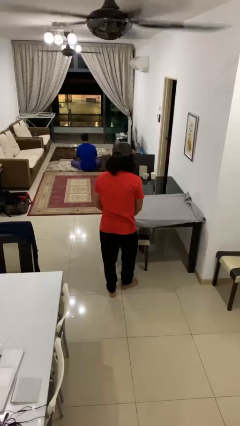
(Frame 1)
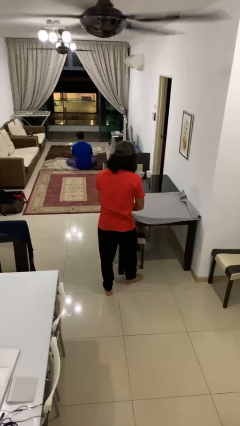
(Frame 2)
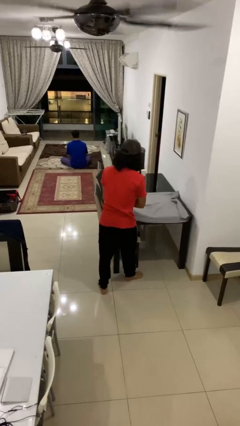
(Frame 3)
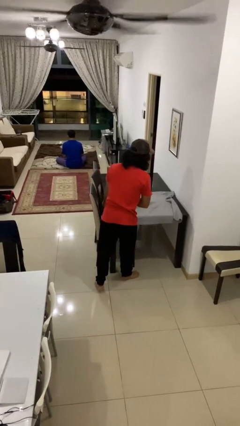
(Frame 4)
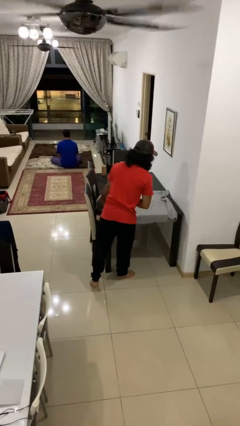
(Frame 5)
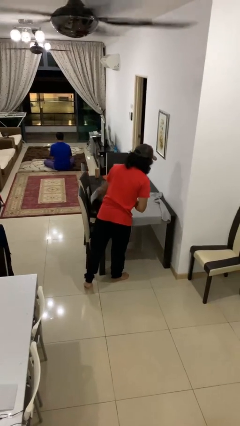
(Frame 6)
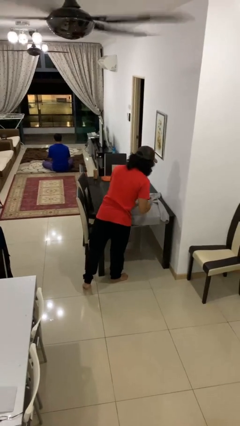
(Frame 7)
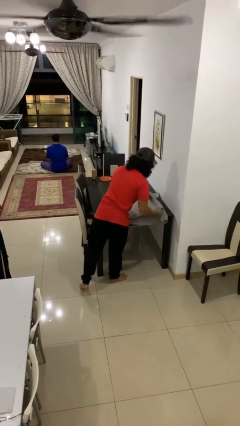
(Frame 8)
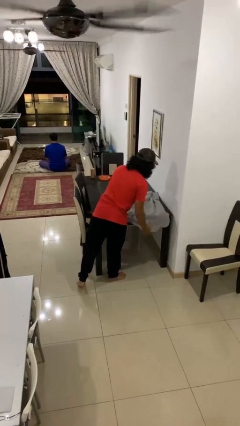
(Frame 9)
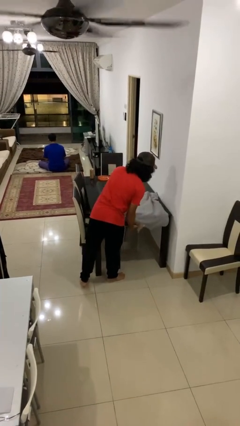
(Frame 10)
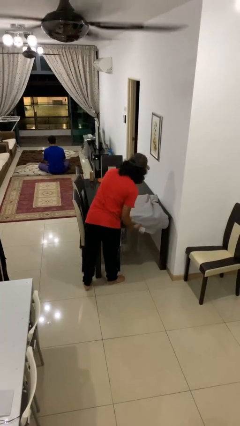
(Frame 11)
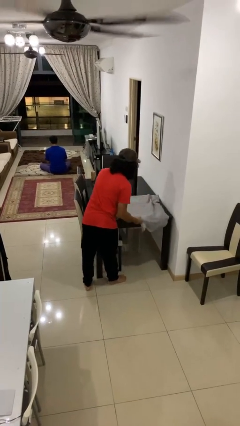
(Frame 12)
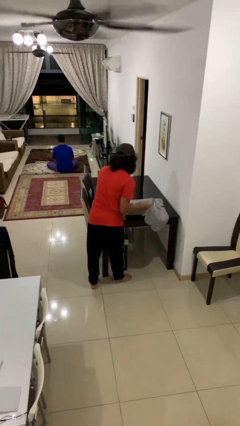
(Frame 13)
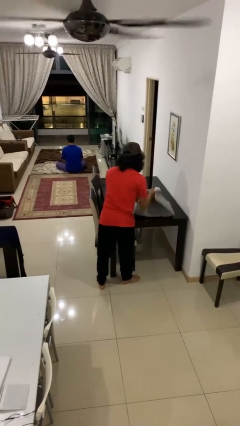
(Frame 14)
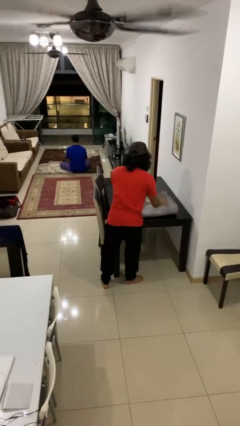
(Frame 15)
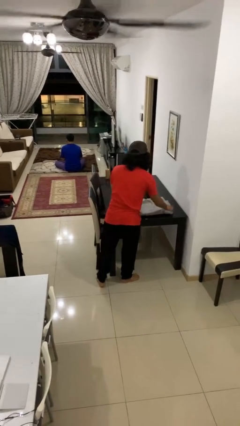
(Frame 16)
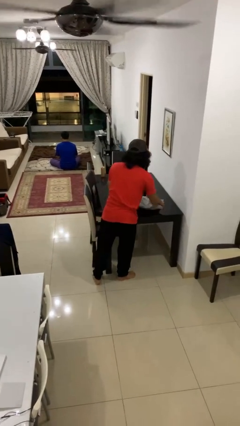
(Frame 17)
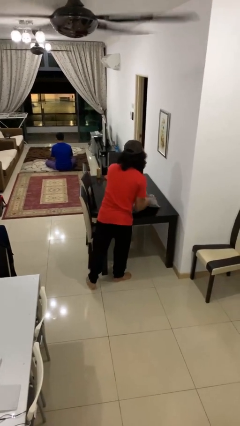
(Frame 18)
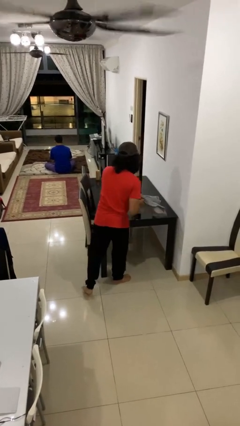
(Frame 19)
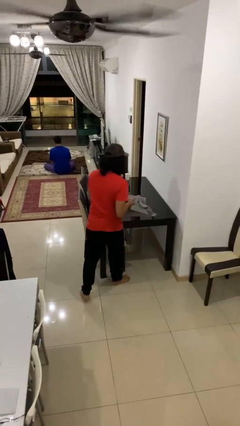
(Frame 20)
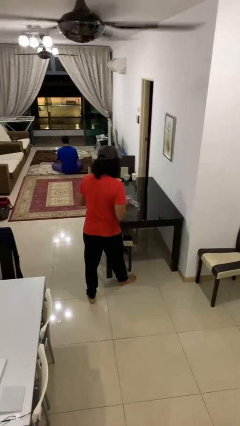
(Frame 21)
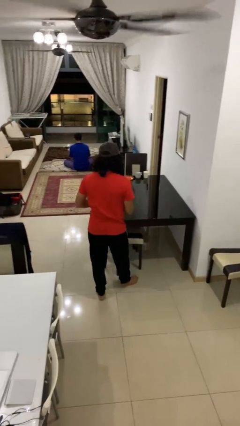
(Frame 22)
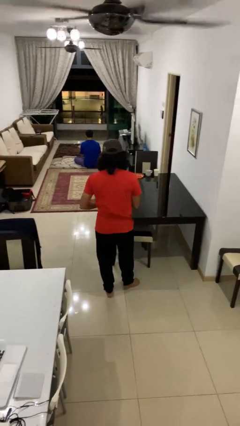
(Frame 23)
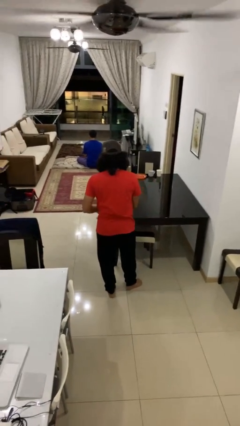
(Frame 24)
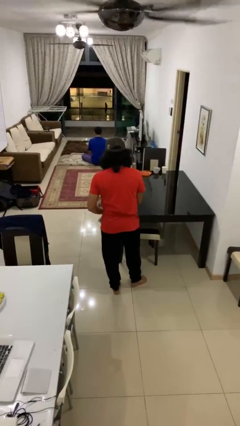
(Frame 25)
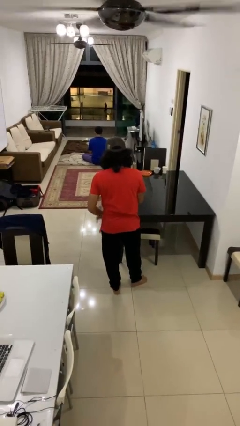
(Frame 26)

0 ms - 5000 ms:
person folds tablecloth

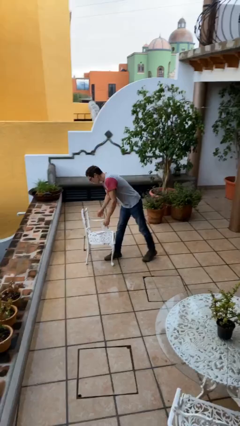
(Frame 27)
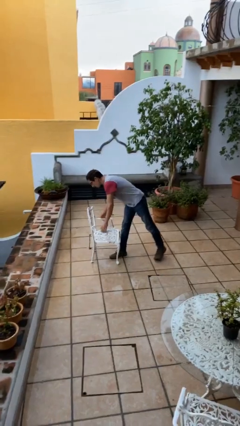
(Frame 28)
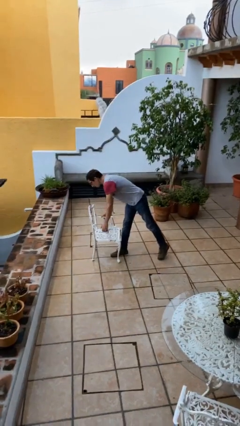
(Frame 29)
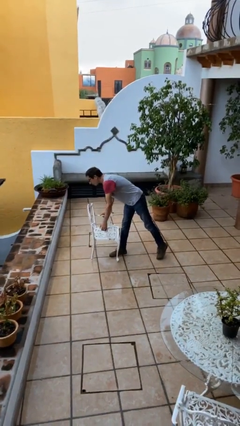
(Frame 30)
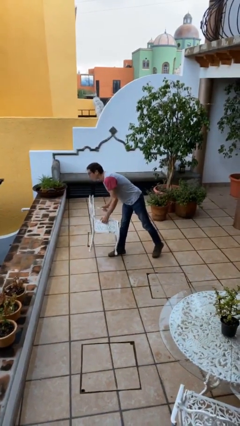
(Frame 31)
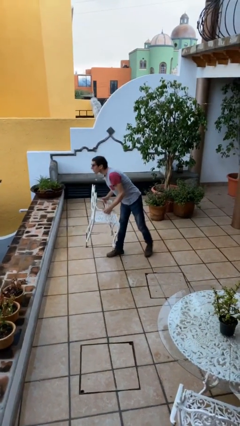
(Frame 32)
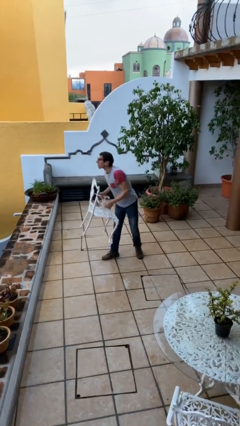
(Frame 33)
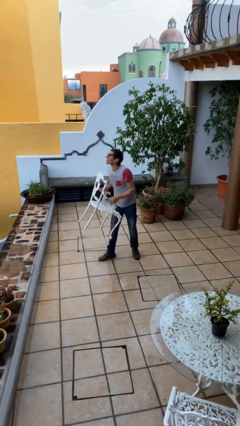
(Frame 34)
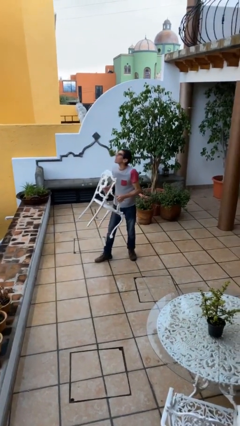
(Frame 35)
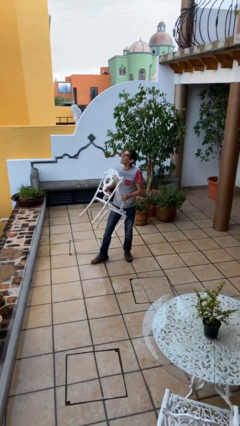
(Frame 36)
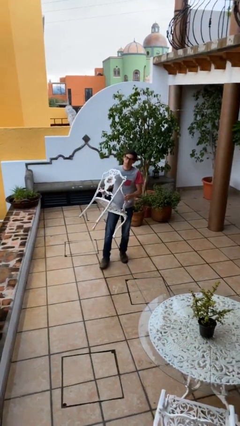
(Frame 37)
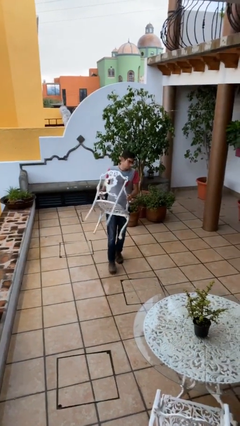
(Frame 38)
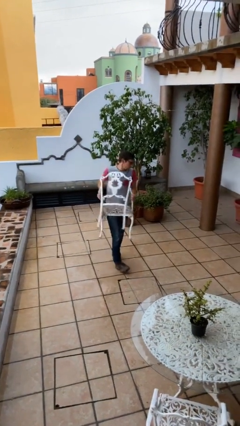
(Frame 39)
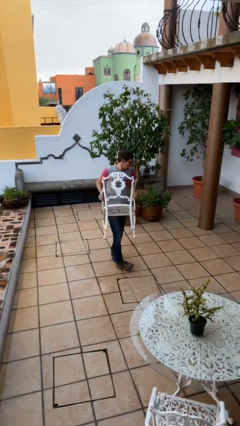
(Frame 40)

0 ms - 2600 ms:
person picks up object from floor

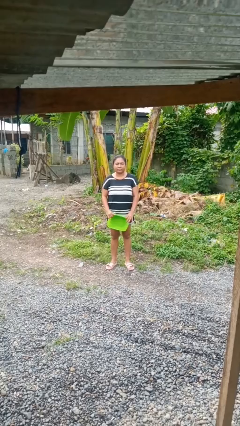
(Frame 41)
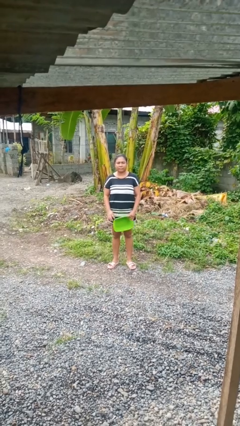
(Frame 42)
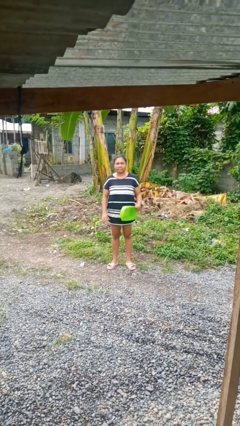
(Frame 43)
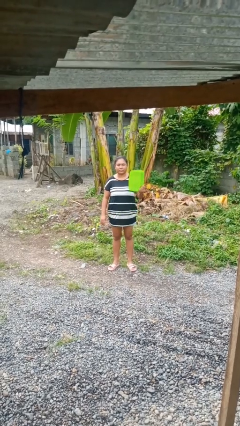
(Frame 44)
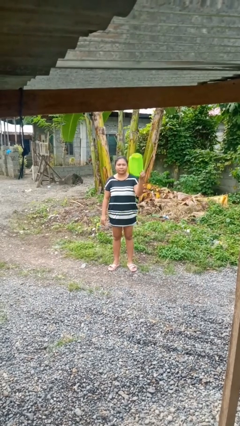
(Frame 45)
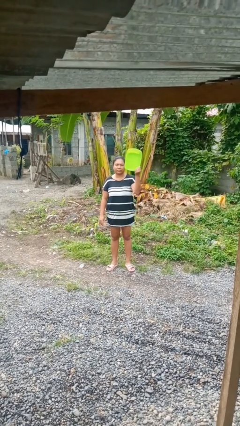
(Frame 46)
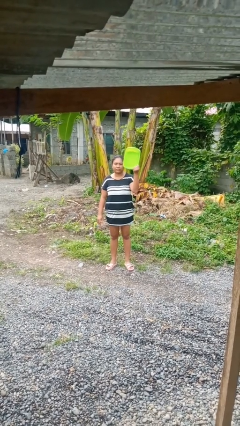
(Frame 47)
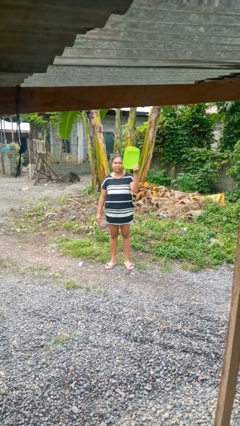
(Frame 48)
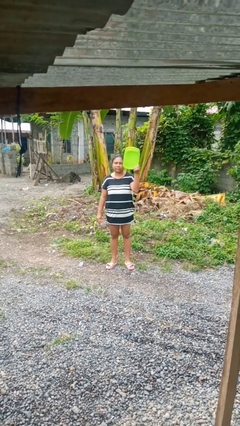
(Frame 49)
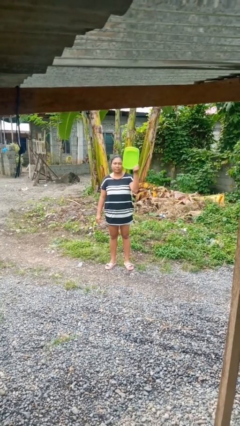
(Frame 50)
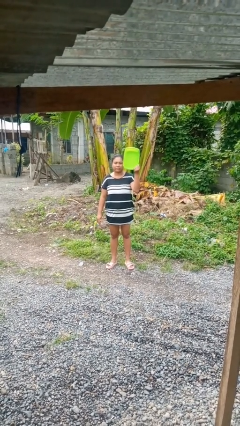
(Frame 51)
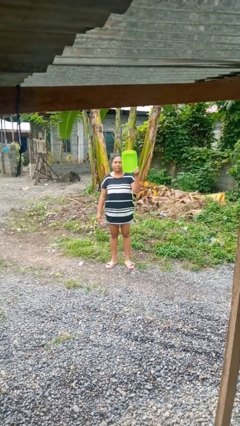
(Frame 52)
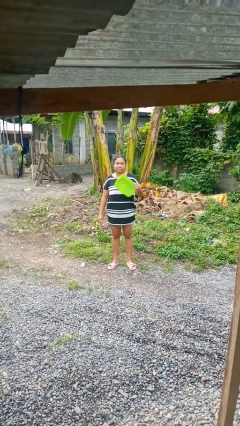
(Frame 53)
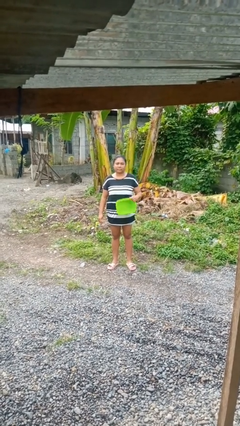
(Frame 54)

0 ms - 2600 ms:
person holds object above head

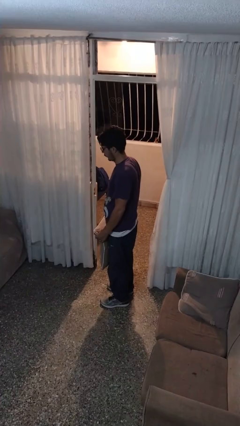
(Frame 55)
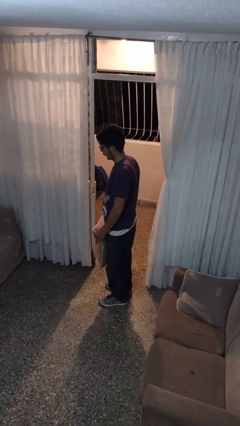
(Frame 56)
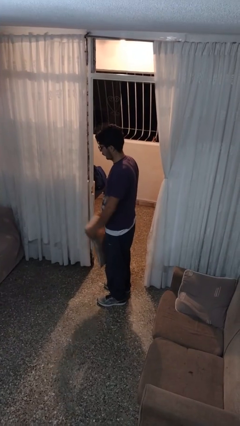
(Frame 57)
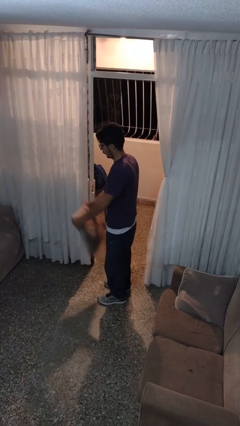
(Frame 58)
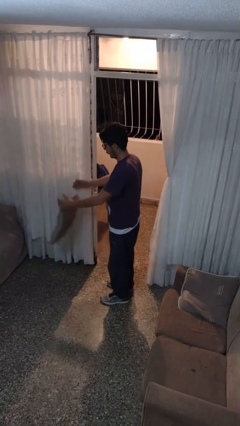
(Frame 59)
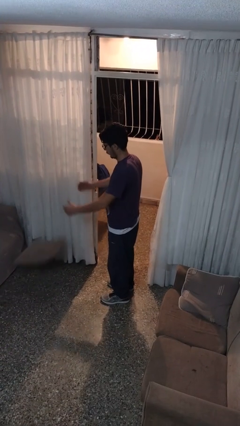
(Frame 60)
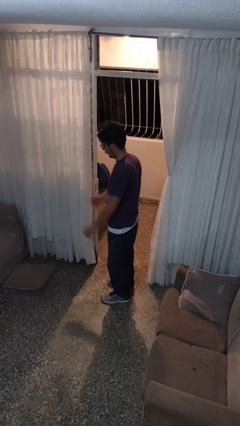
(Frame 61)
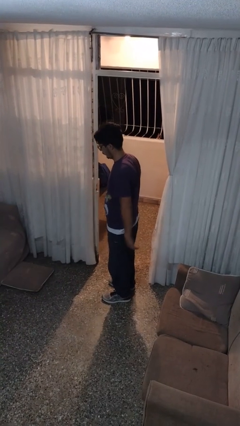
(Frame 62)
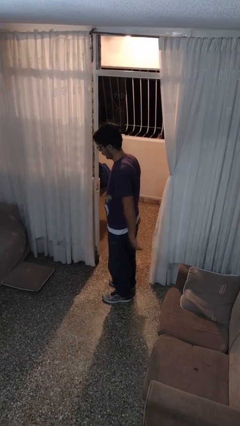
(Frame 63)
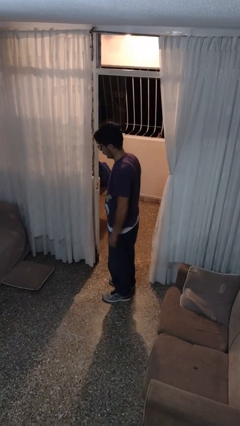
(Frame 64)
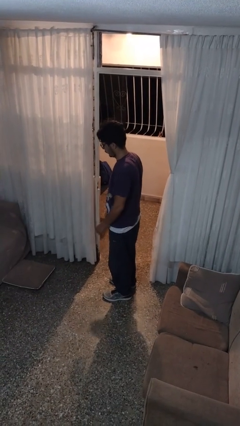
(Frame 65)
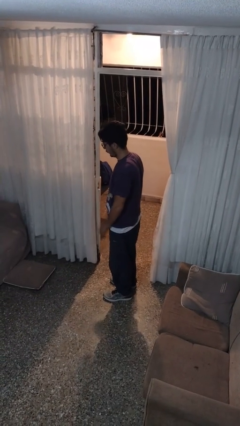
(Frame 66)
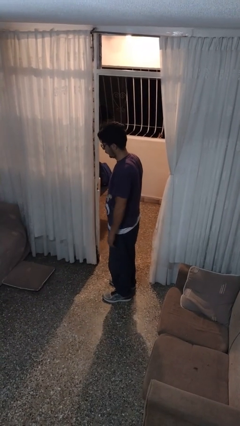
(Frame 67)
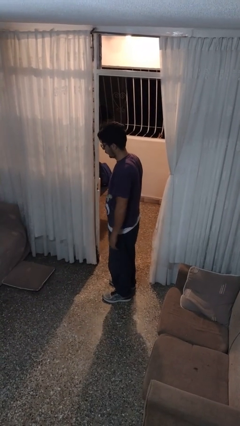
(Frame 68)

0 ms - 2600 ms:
person throws object to ground

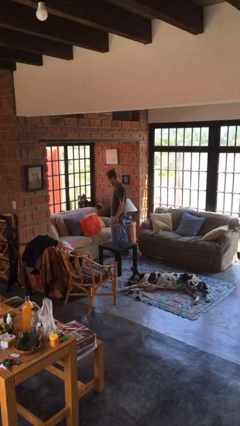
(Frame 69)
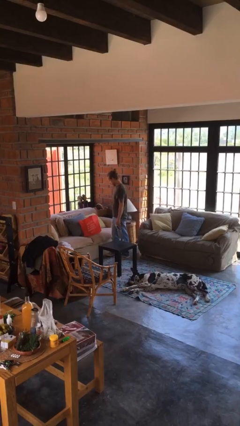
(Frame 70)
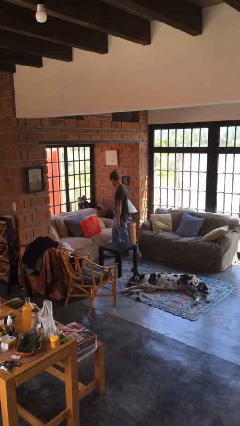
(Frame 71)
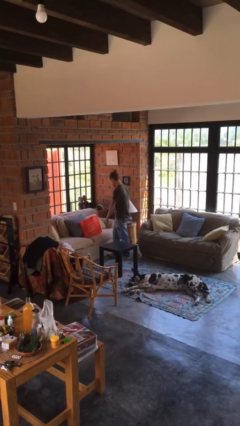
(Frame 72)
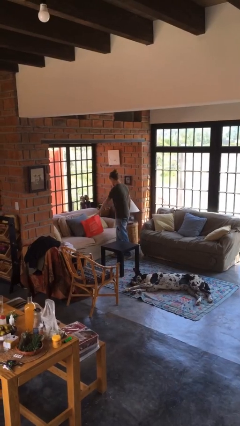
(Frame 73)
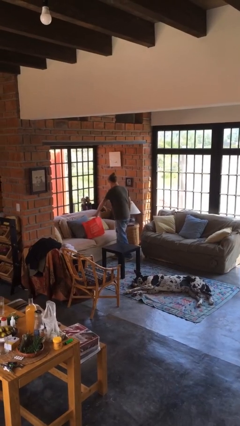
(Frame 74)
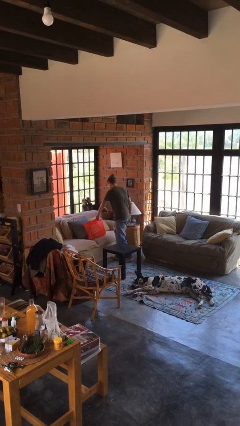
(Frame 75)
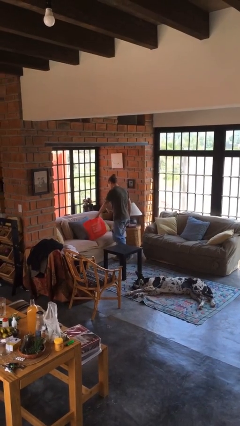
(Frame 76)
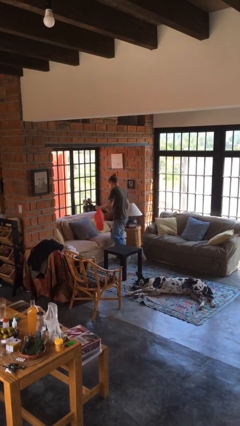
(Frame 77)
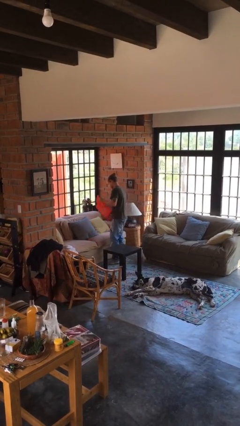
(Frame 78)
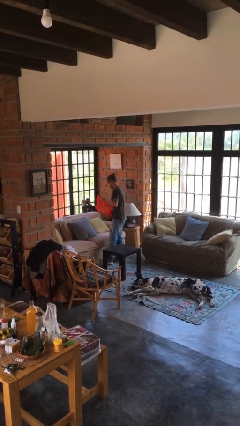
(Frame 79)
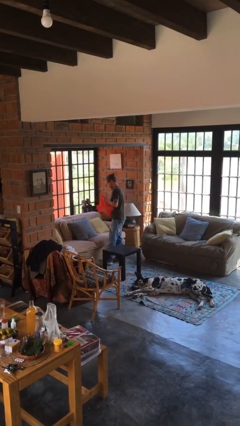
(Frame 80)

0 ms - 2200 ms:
person picks up object from couch

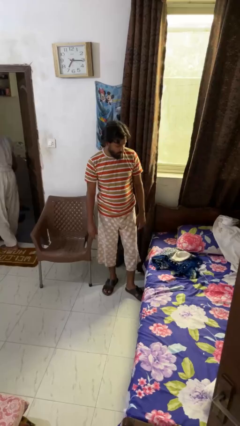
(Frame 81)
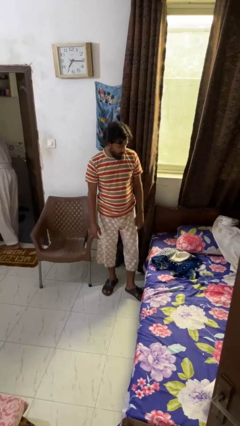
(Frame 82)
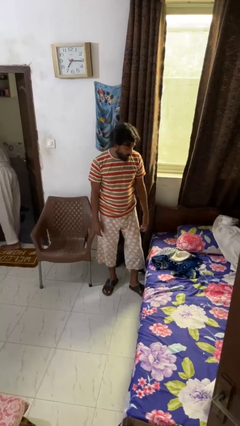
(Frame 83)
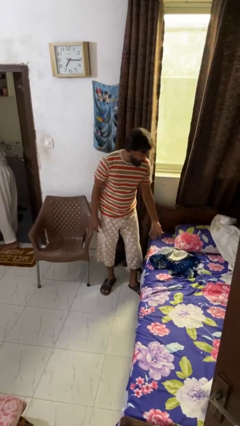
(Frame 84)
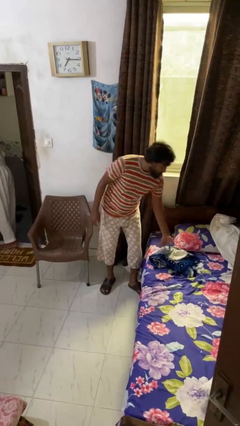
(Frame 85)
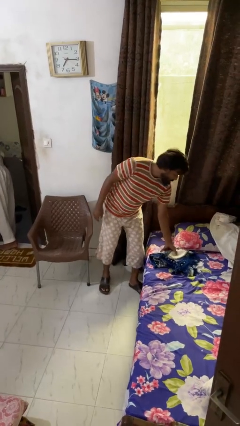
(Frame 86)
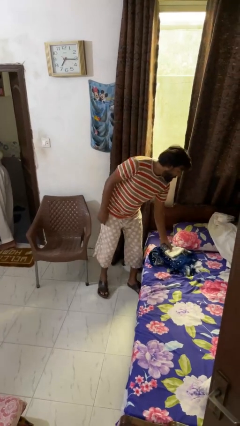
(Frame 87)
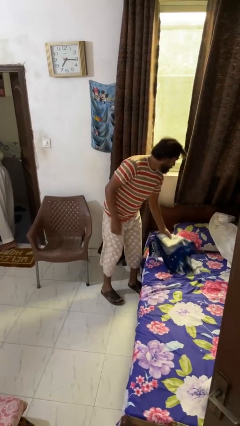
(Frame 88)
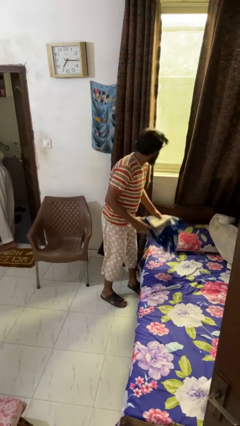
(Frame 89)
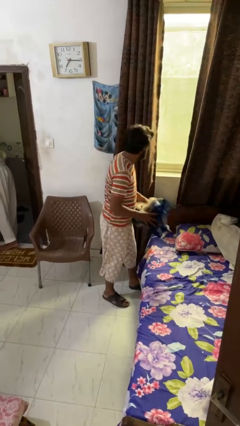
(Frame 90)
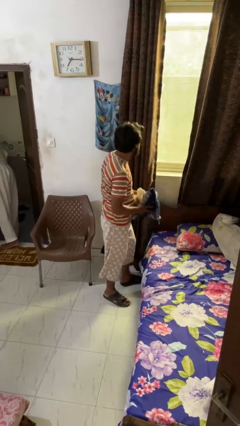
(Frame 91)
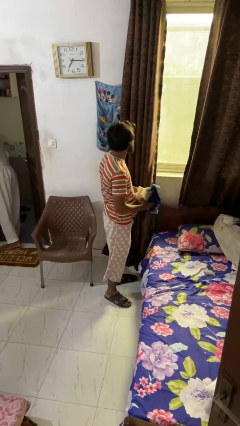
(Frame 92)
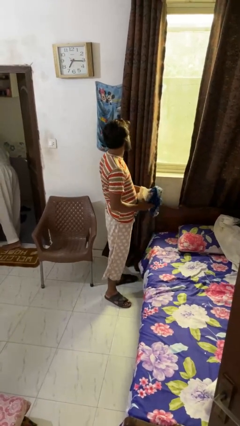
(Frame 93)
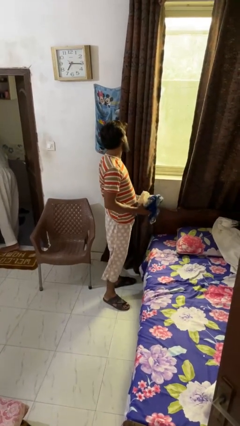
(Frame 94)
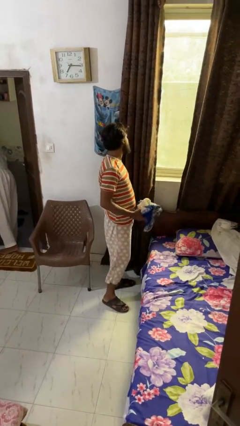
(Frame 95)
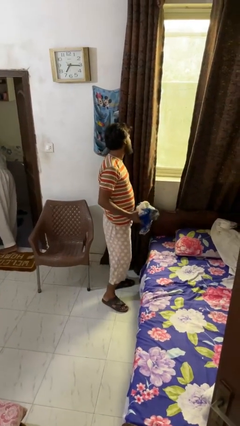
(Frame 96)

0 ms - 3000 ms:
person picks up object from bed
